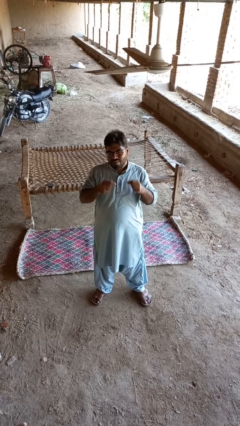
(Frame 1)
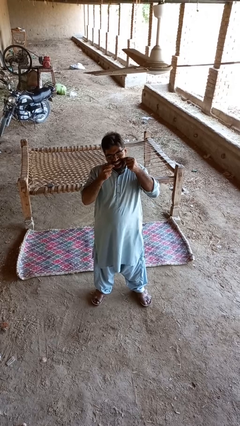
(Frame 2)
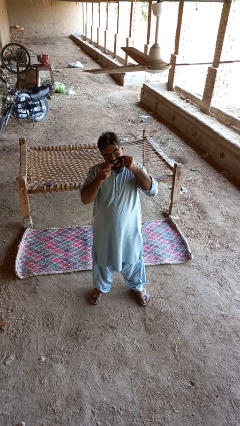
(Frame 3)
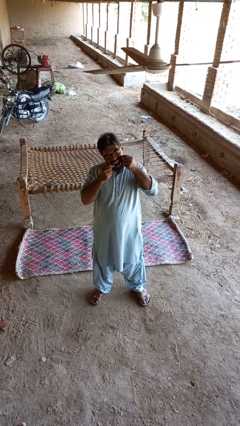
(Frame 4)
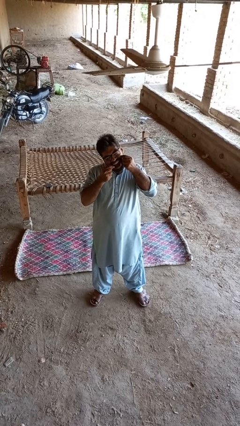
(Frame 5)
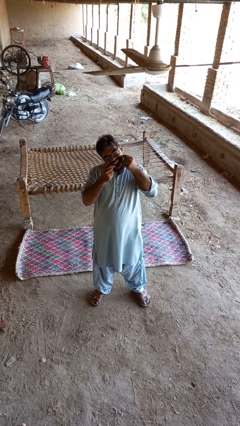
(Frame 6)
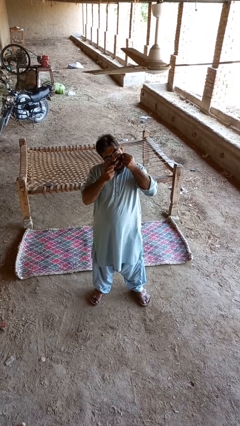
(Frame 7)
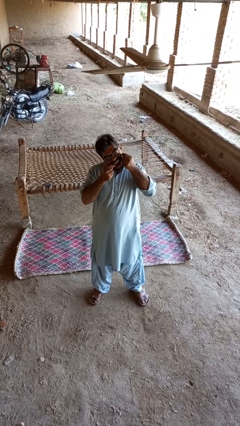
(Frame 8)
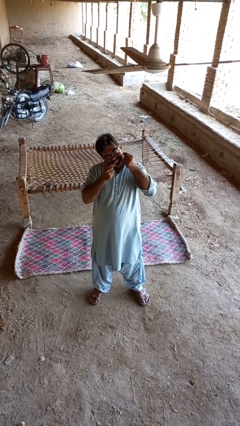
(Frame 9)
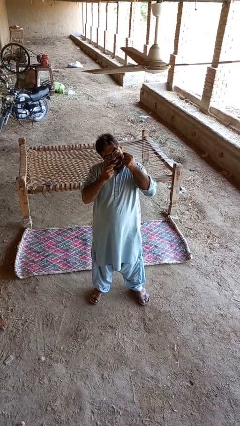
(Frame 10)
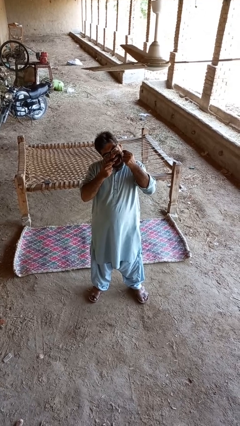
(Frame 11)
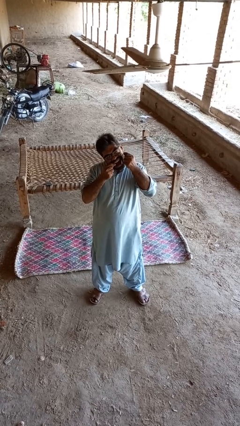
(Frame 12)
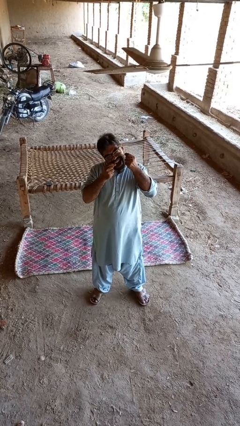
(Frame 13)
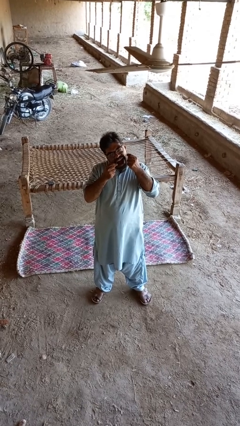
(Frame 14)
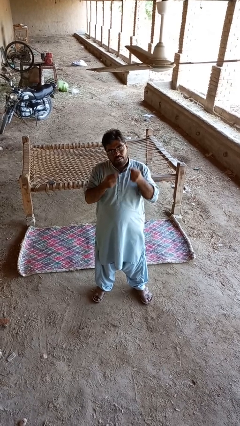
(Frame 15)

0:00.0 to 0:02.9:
person flosses

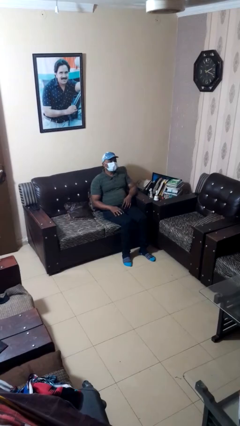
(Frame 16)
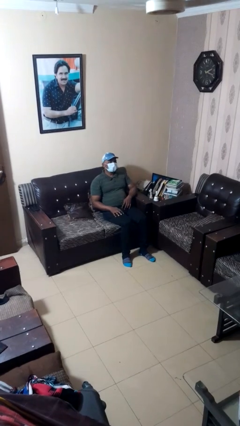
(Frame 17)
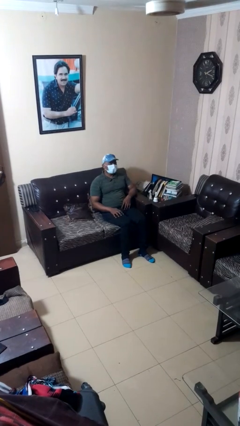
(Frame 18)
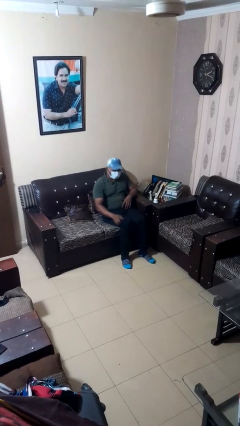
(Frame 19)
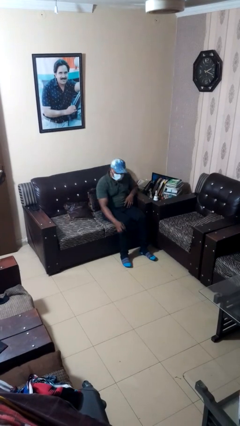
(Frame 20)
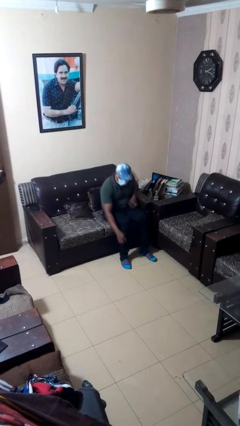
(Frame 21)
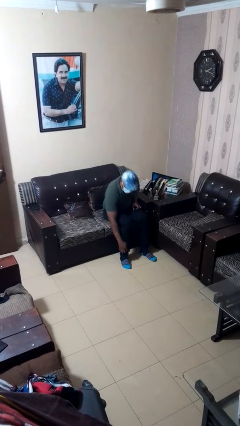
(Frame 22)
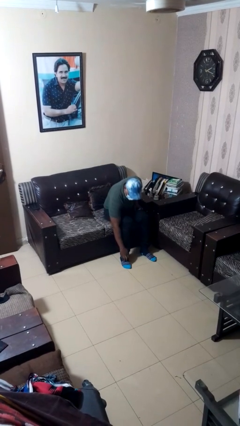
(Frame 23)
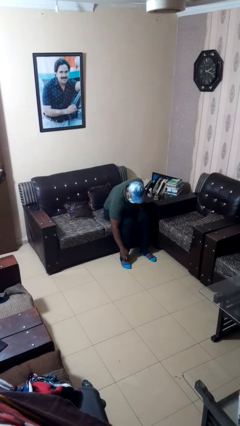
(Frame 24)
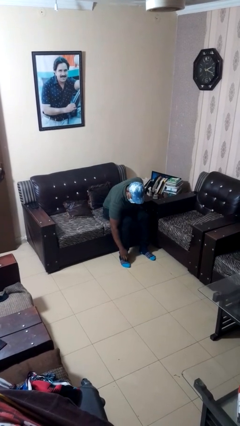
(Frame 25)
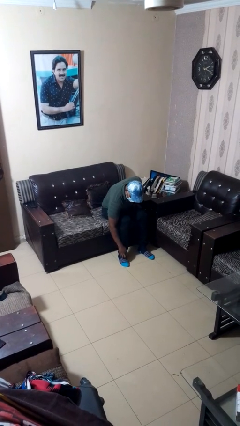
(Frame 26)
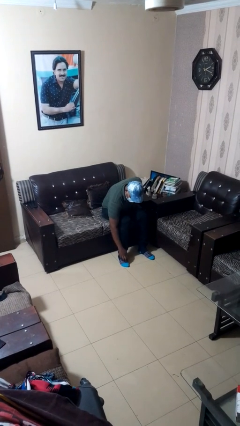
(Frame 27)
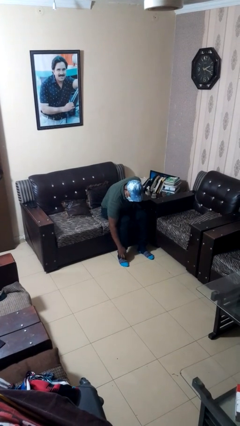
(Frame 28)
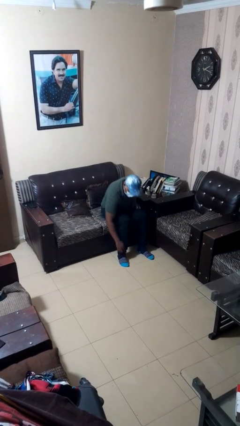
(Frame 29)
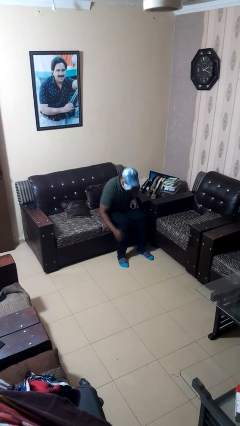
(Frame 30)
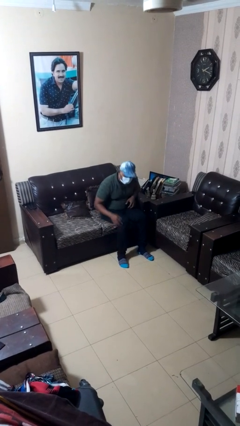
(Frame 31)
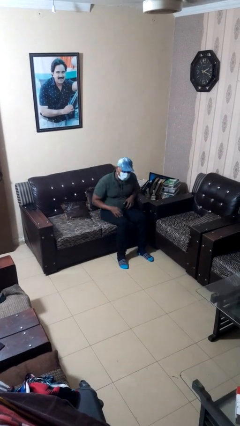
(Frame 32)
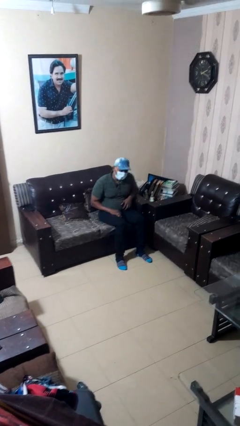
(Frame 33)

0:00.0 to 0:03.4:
person rubs foot

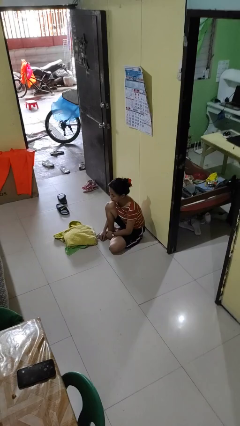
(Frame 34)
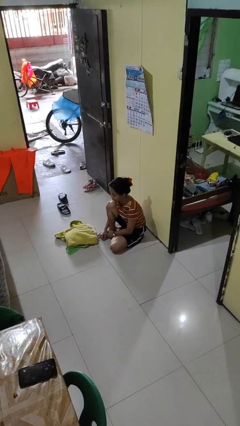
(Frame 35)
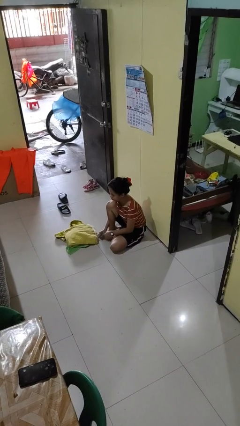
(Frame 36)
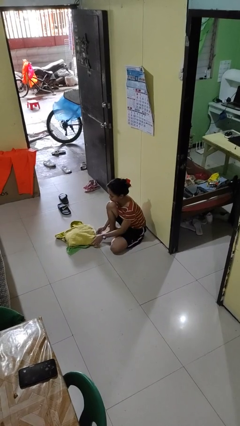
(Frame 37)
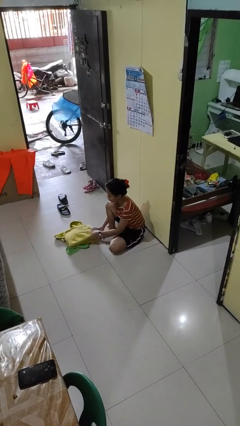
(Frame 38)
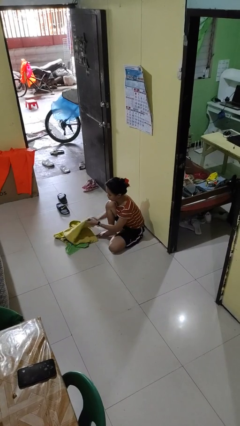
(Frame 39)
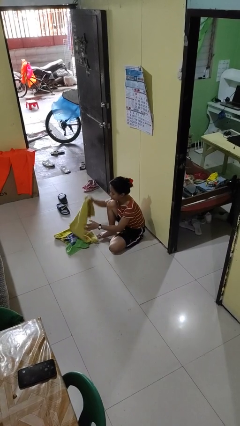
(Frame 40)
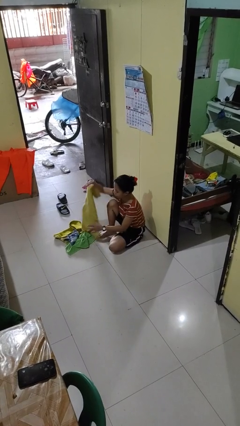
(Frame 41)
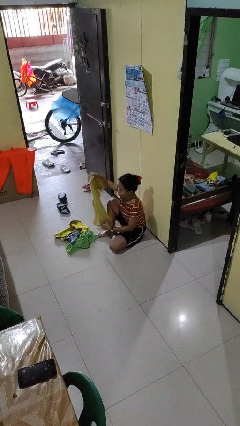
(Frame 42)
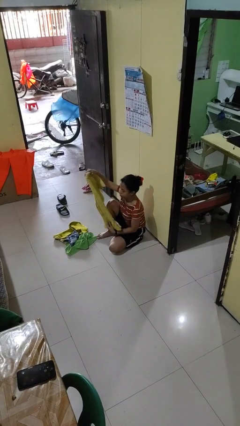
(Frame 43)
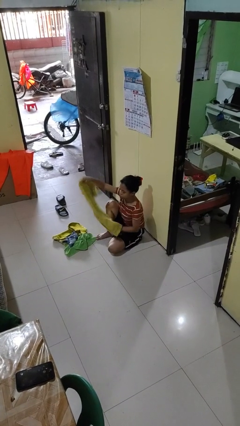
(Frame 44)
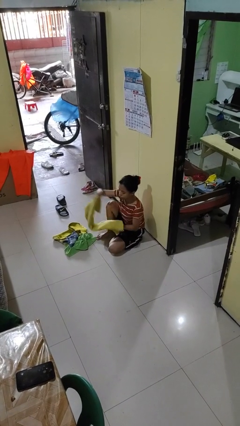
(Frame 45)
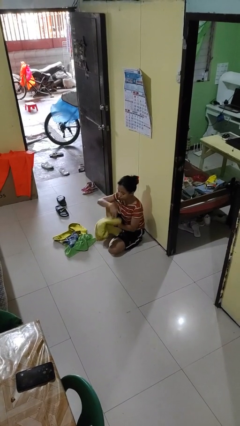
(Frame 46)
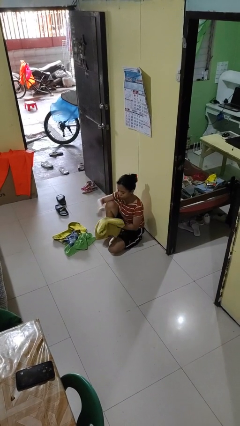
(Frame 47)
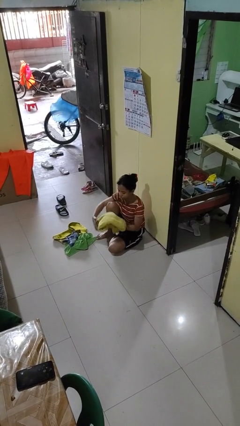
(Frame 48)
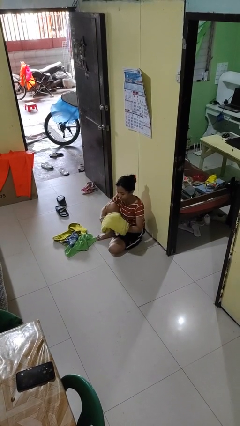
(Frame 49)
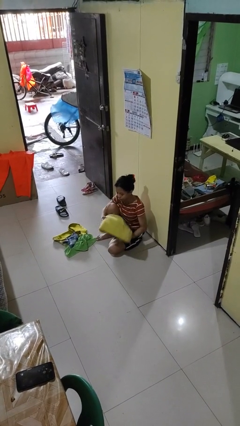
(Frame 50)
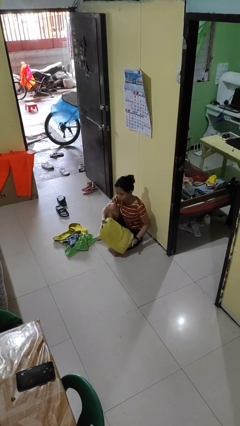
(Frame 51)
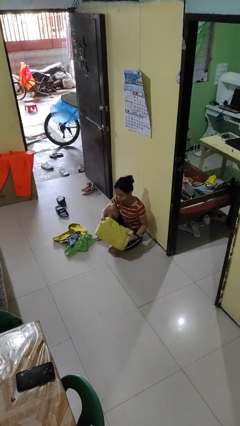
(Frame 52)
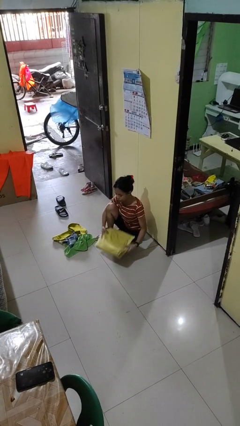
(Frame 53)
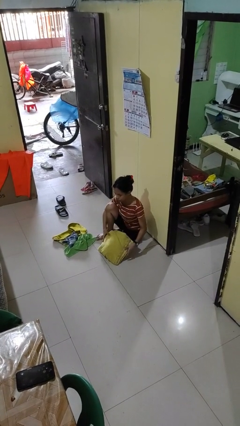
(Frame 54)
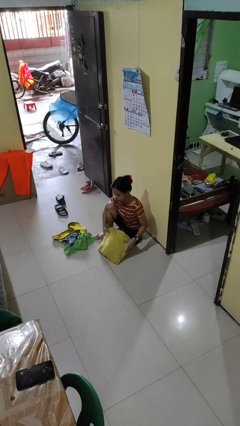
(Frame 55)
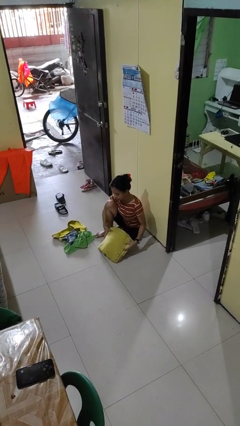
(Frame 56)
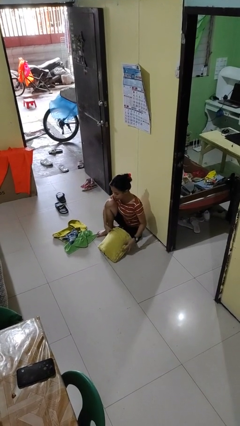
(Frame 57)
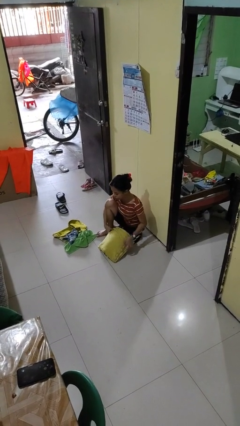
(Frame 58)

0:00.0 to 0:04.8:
person folds towel

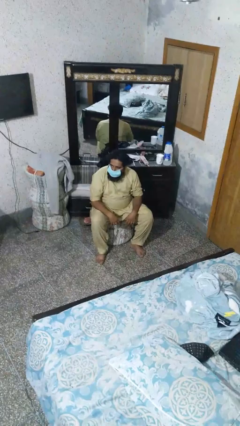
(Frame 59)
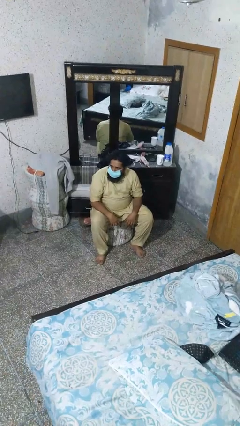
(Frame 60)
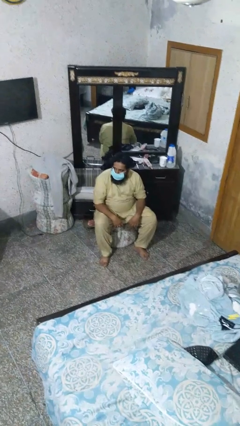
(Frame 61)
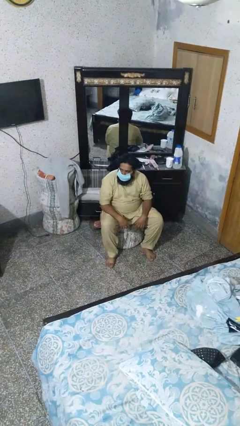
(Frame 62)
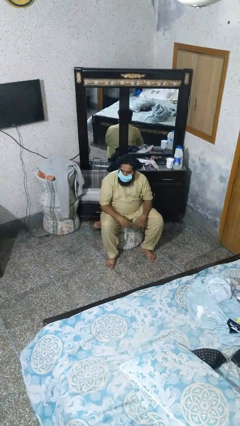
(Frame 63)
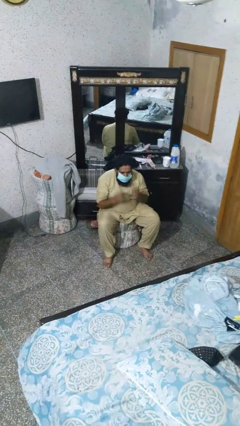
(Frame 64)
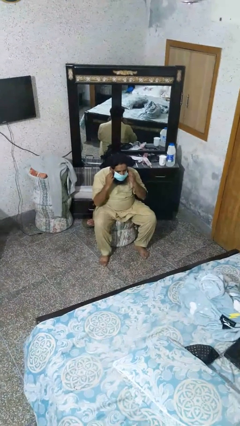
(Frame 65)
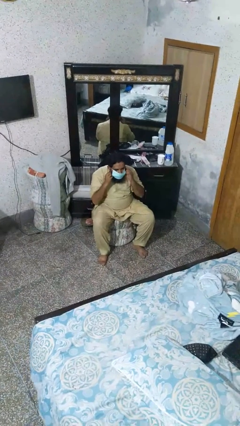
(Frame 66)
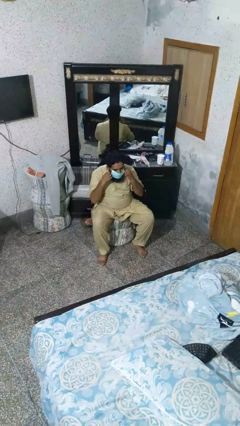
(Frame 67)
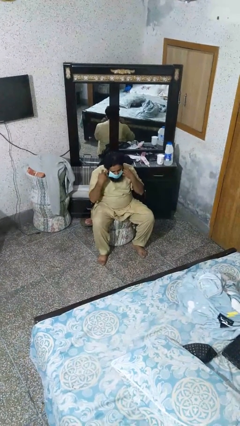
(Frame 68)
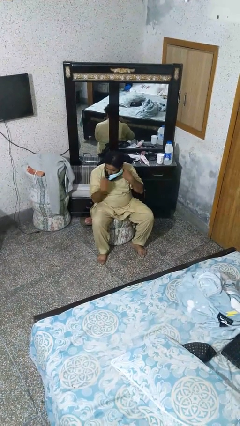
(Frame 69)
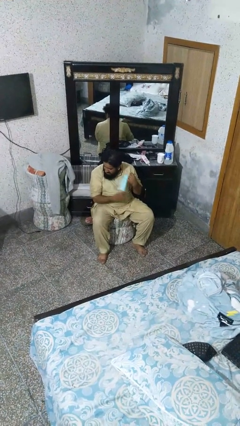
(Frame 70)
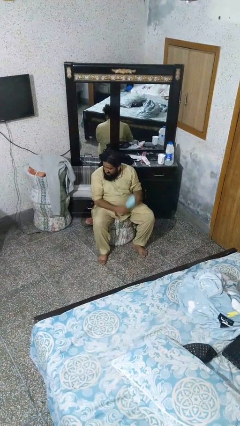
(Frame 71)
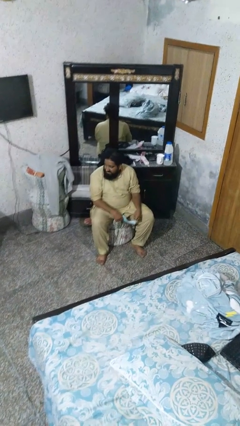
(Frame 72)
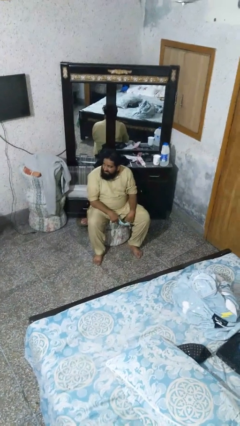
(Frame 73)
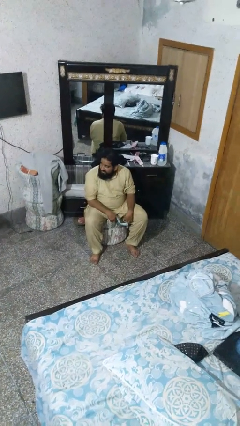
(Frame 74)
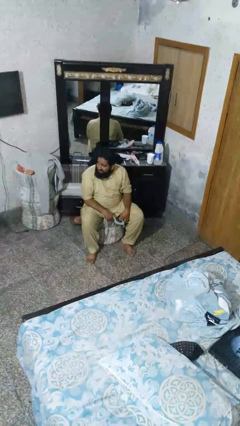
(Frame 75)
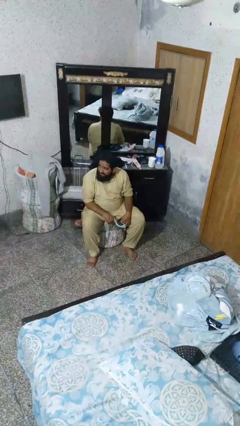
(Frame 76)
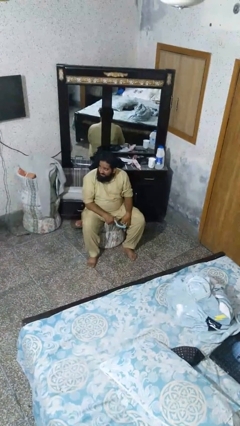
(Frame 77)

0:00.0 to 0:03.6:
person takes off facemask

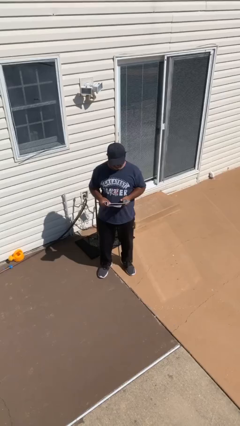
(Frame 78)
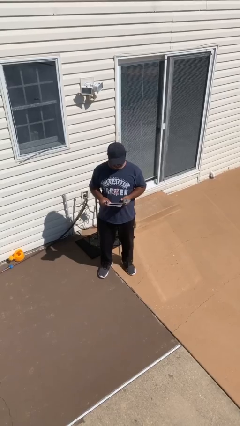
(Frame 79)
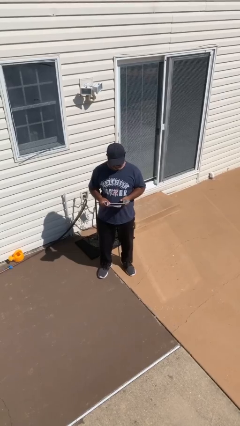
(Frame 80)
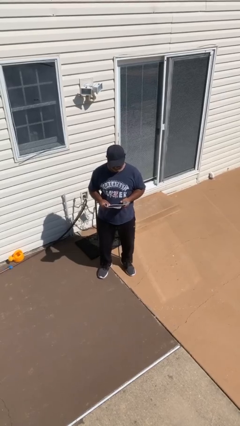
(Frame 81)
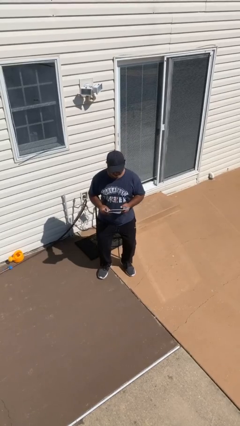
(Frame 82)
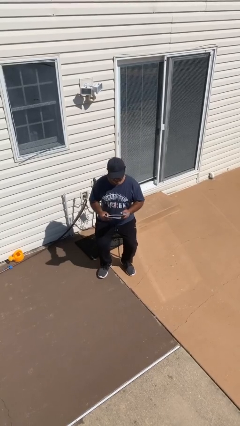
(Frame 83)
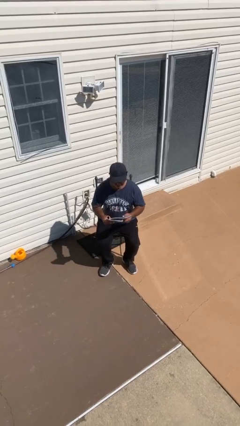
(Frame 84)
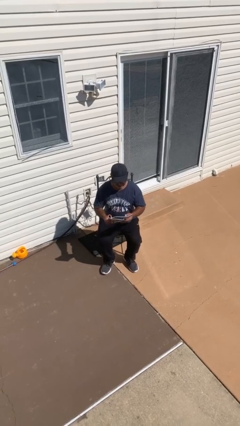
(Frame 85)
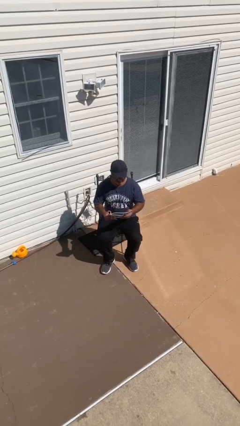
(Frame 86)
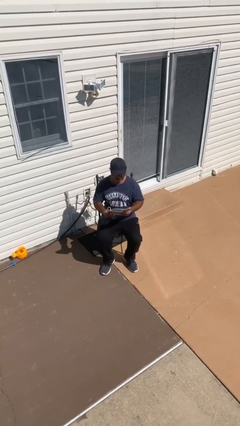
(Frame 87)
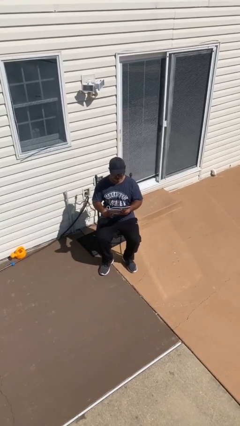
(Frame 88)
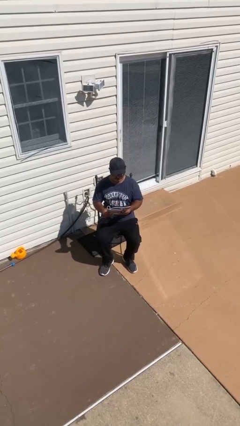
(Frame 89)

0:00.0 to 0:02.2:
person sits down

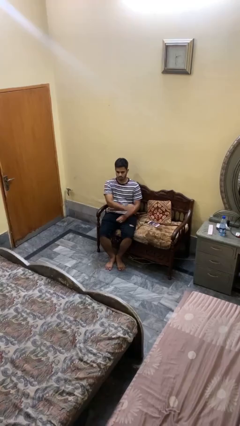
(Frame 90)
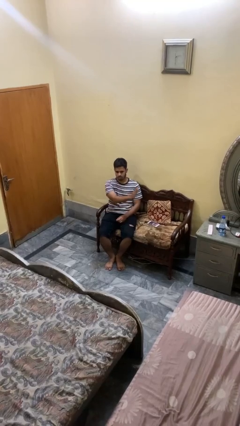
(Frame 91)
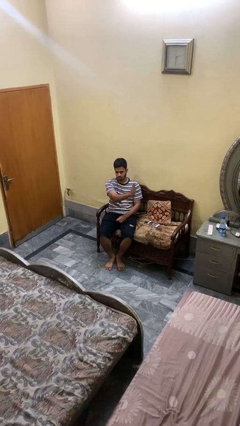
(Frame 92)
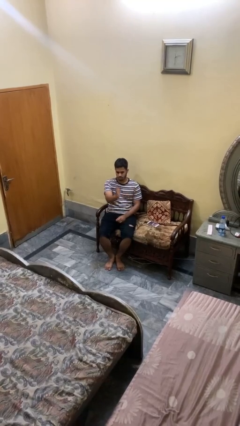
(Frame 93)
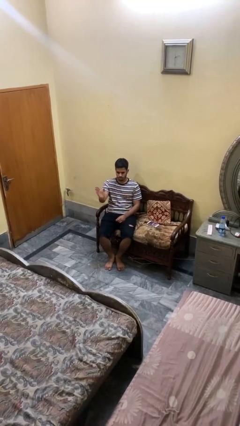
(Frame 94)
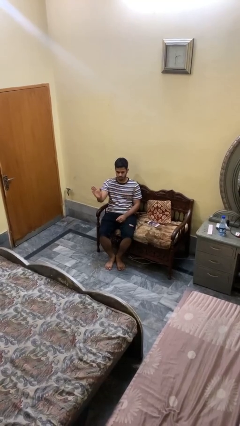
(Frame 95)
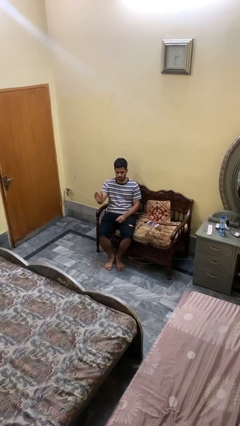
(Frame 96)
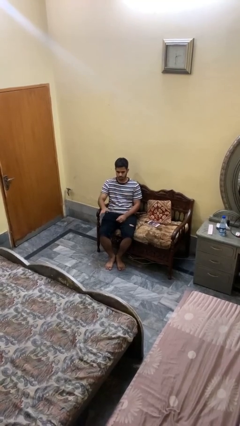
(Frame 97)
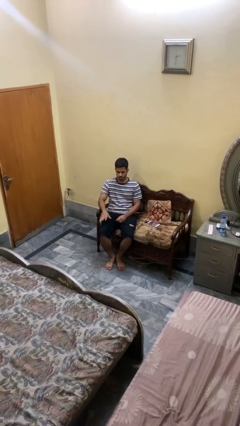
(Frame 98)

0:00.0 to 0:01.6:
person gestures swipe right
